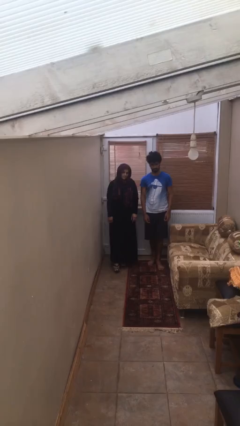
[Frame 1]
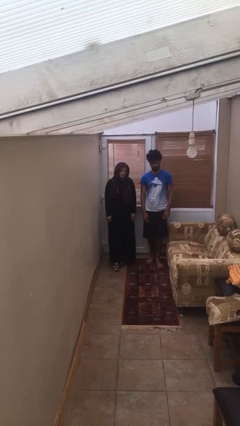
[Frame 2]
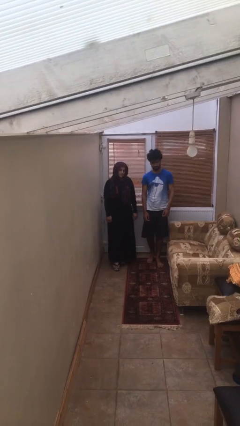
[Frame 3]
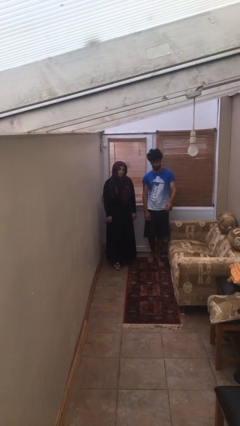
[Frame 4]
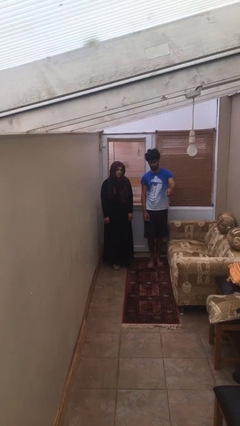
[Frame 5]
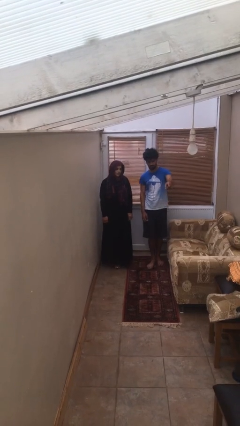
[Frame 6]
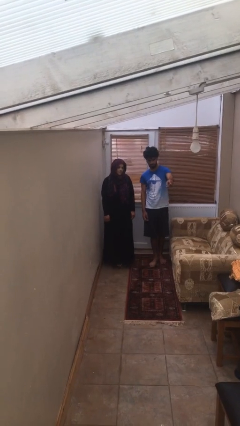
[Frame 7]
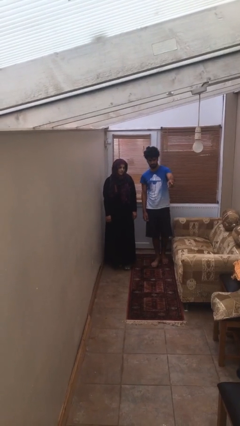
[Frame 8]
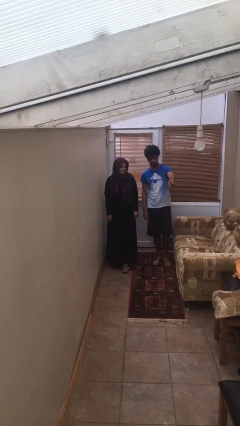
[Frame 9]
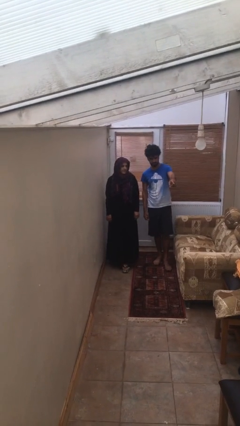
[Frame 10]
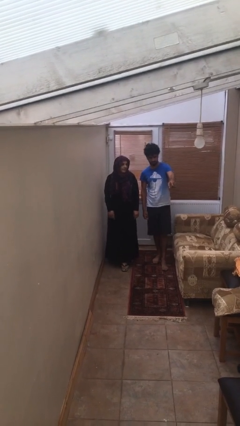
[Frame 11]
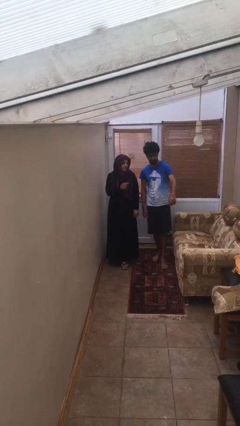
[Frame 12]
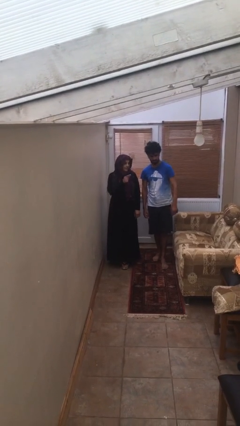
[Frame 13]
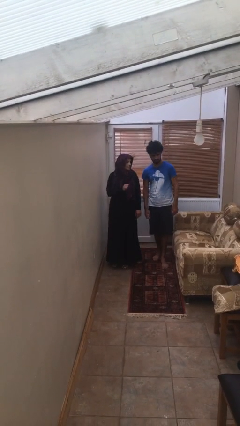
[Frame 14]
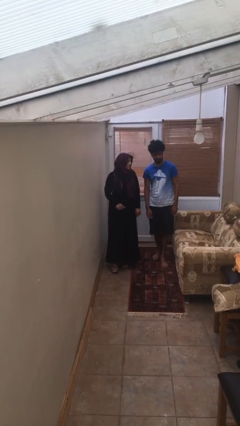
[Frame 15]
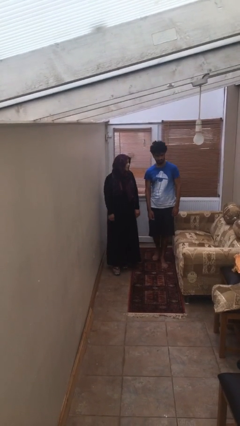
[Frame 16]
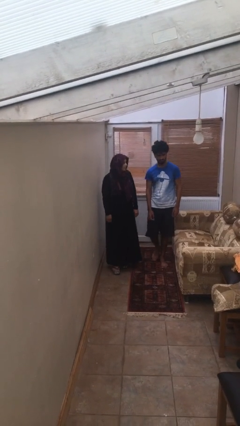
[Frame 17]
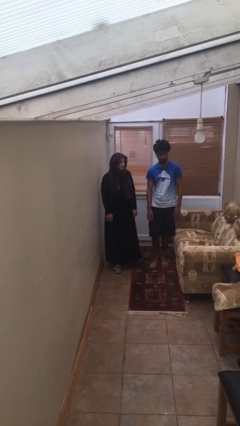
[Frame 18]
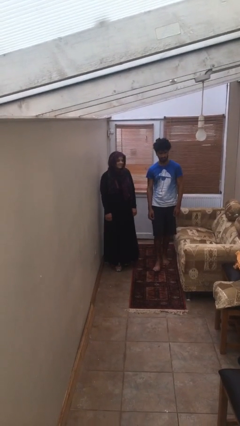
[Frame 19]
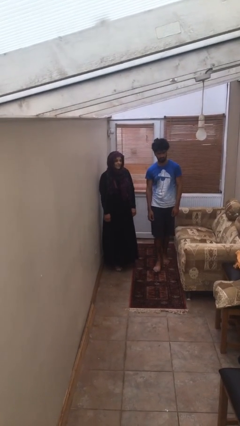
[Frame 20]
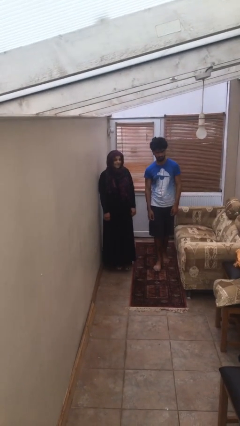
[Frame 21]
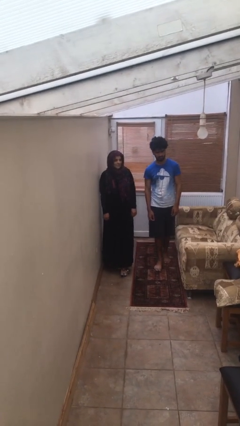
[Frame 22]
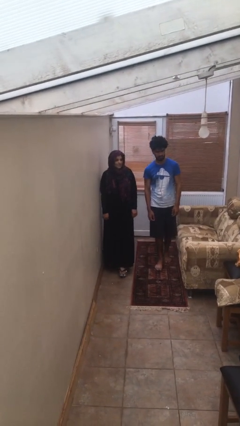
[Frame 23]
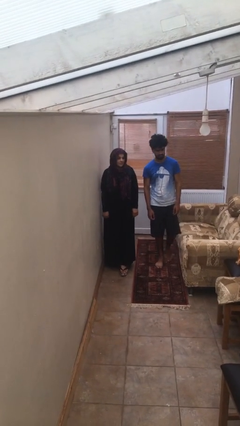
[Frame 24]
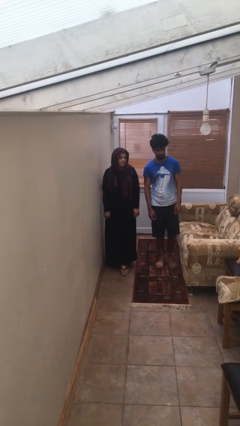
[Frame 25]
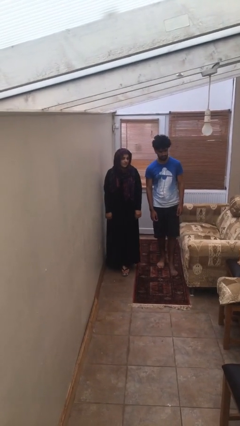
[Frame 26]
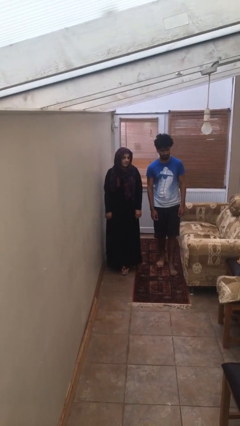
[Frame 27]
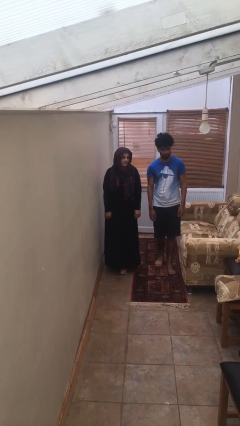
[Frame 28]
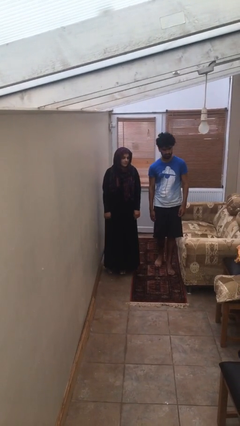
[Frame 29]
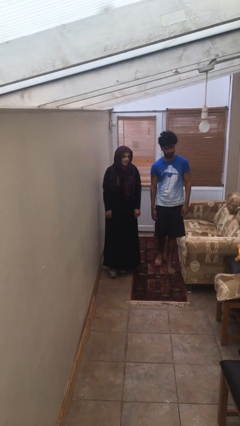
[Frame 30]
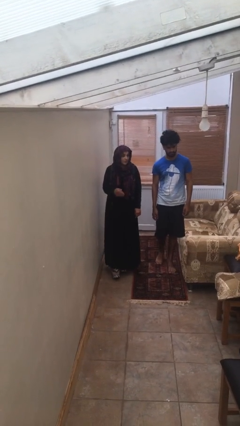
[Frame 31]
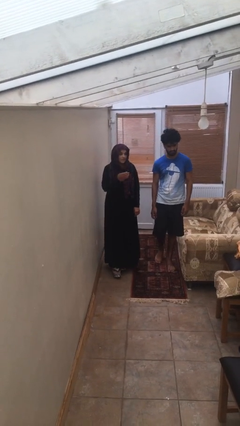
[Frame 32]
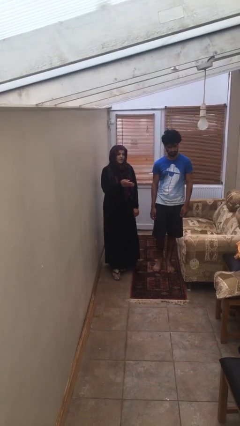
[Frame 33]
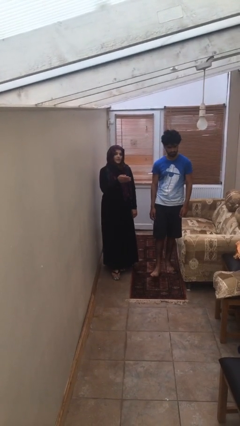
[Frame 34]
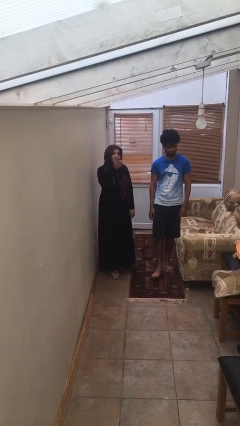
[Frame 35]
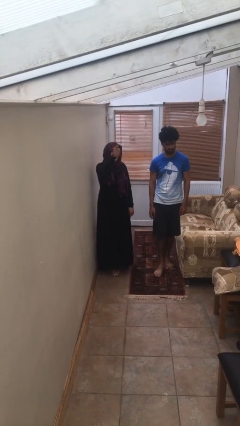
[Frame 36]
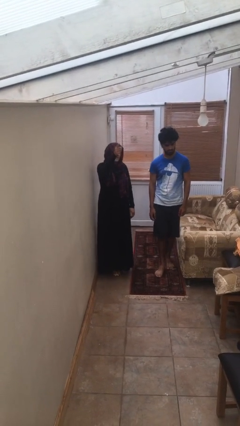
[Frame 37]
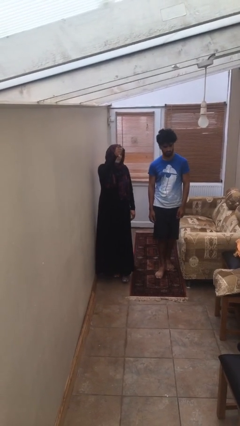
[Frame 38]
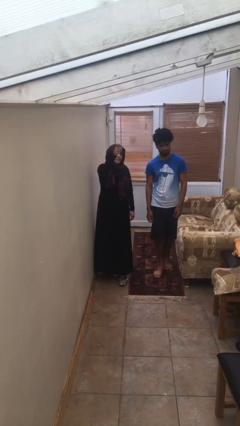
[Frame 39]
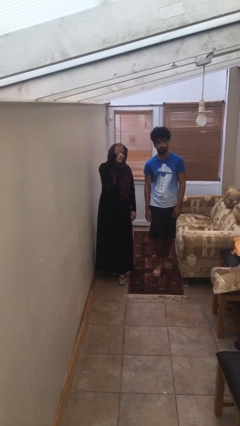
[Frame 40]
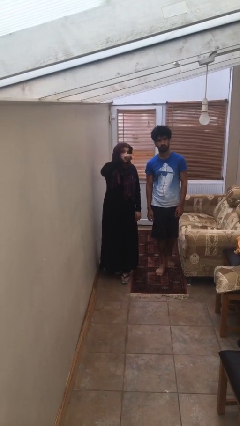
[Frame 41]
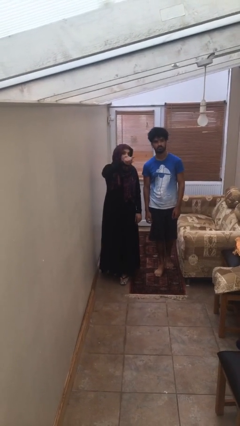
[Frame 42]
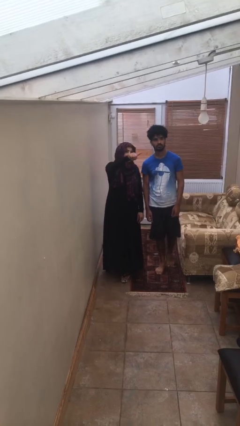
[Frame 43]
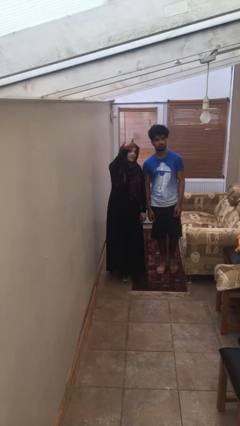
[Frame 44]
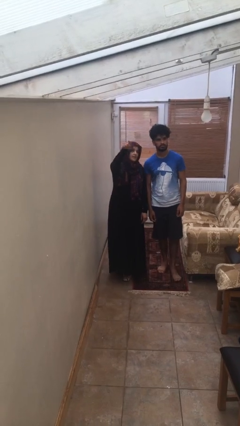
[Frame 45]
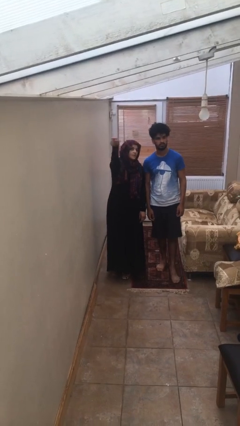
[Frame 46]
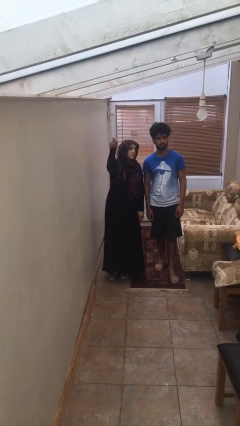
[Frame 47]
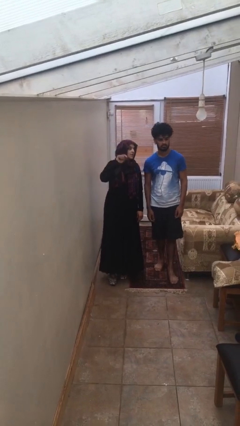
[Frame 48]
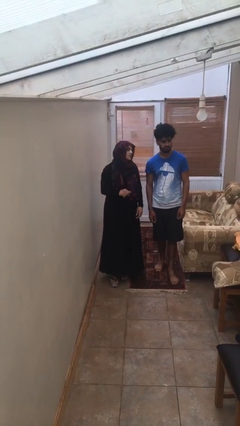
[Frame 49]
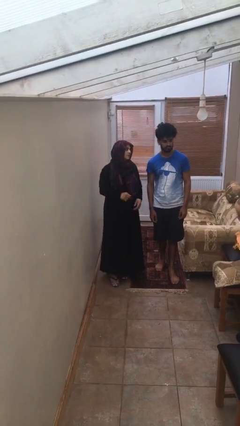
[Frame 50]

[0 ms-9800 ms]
person talks to person

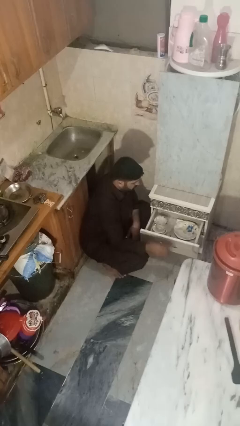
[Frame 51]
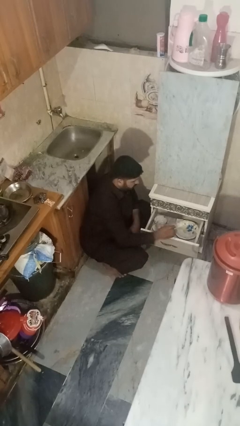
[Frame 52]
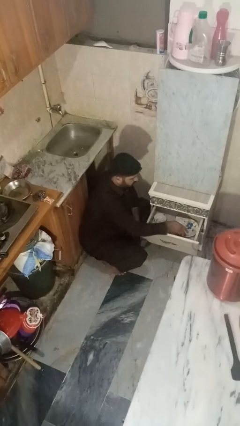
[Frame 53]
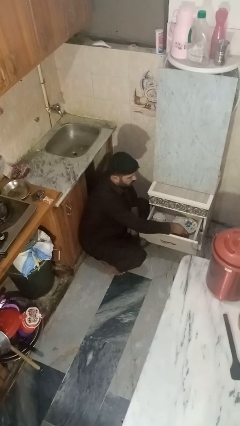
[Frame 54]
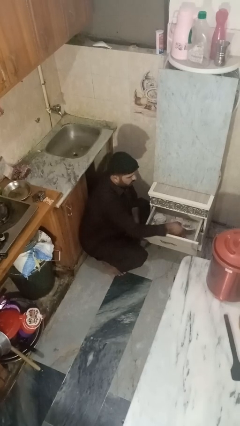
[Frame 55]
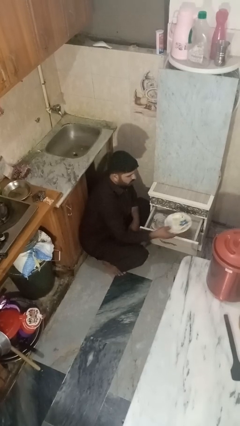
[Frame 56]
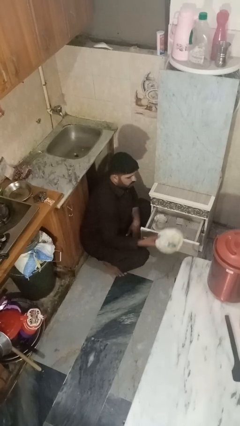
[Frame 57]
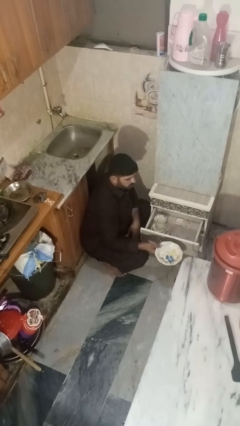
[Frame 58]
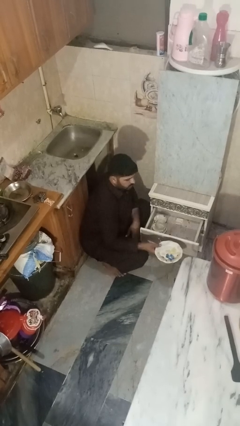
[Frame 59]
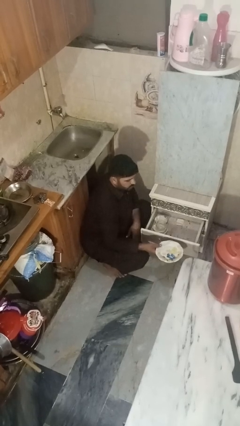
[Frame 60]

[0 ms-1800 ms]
person takes object from kitchen drawer

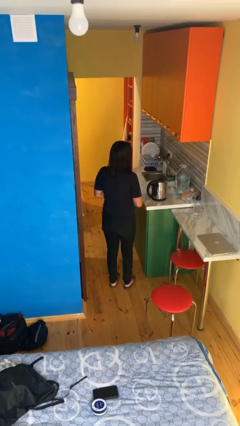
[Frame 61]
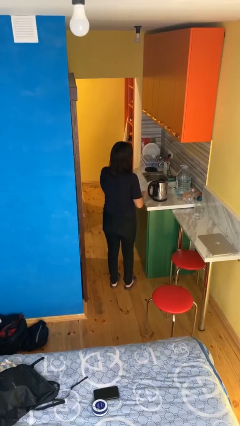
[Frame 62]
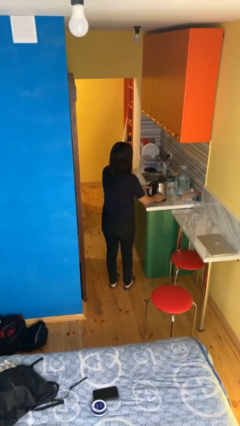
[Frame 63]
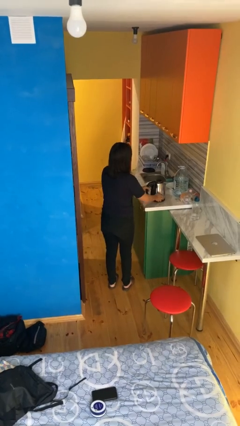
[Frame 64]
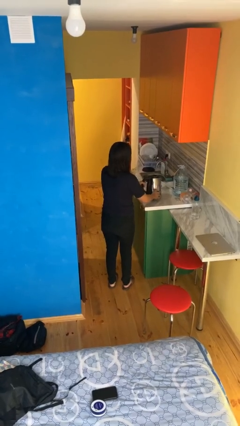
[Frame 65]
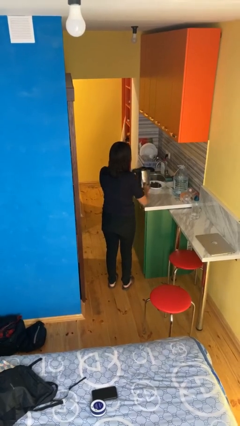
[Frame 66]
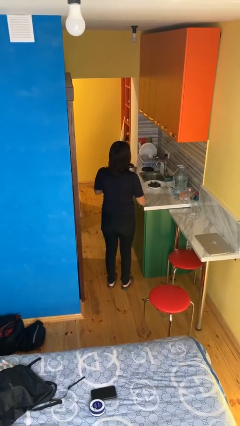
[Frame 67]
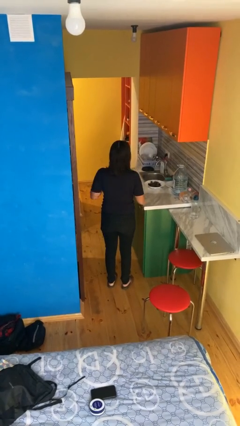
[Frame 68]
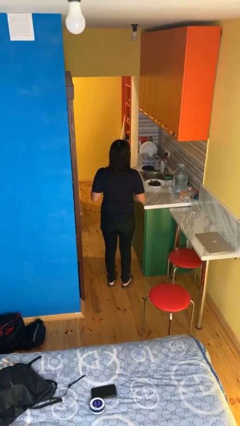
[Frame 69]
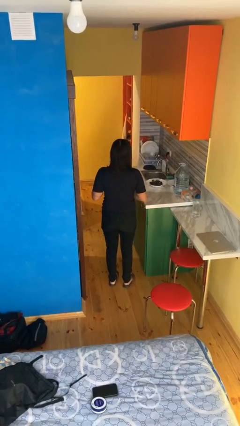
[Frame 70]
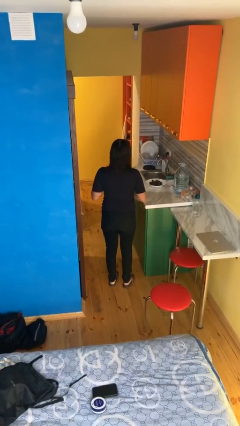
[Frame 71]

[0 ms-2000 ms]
person picks up object from countertop

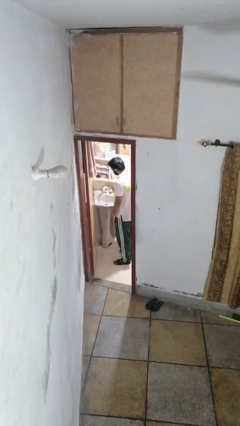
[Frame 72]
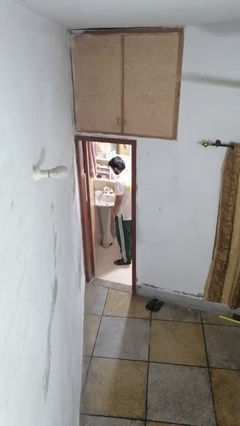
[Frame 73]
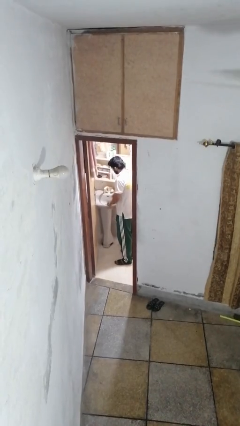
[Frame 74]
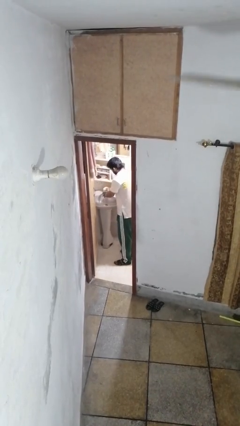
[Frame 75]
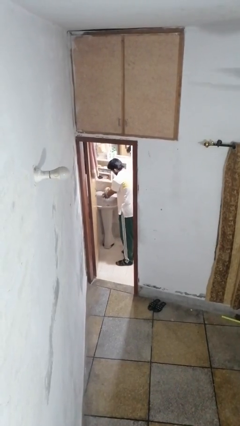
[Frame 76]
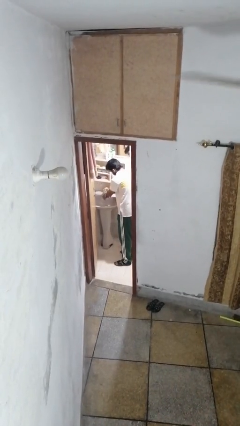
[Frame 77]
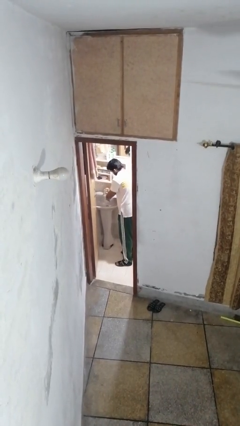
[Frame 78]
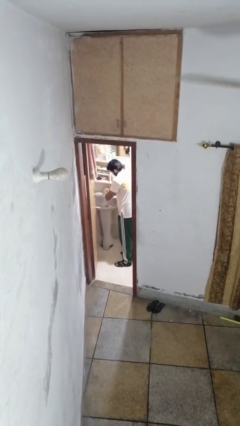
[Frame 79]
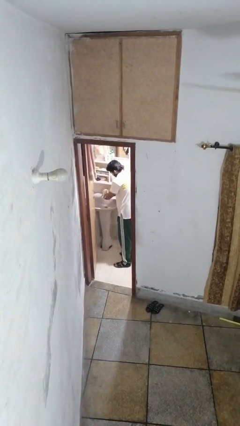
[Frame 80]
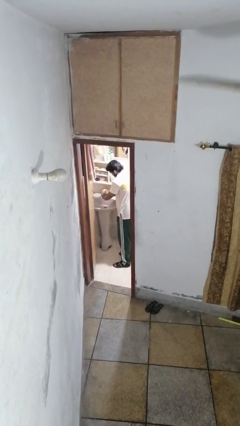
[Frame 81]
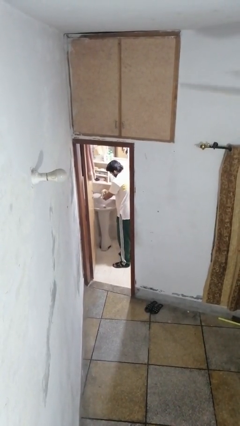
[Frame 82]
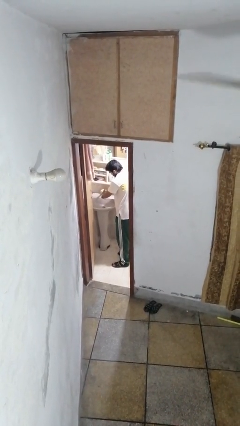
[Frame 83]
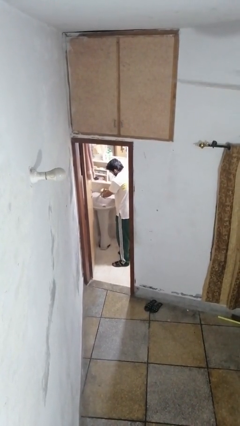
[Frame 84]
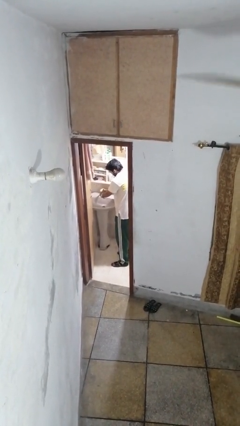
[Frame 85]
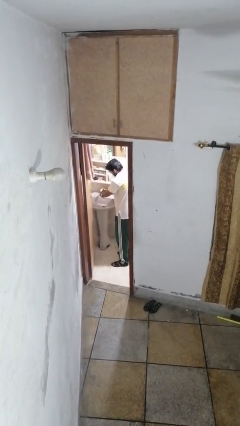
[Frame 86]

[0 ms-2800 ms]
person washes hands

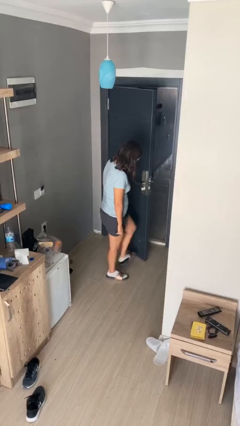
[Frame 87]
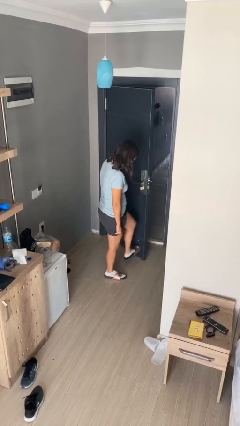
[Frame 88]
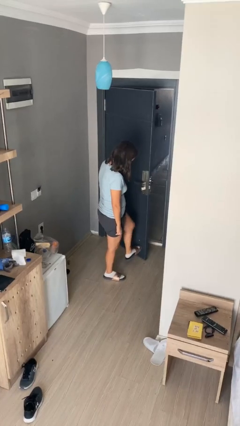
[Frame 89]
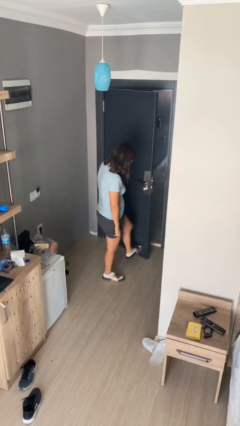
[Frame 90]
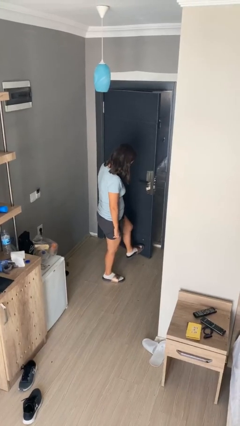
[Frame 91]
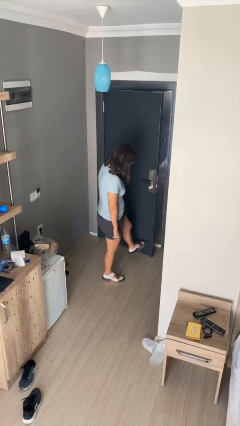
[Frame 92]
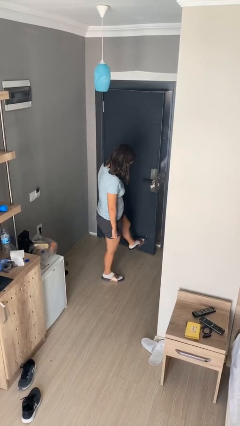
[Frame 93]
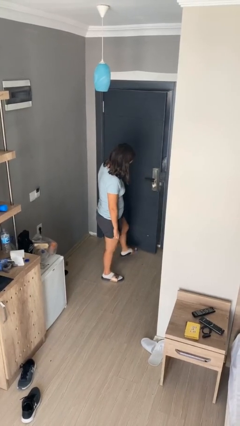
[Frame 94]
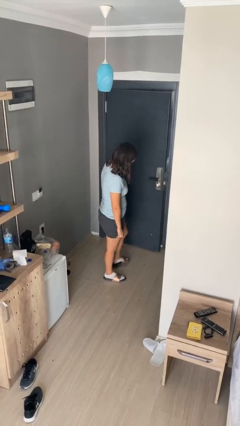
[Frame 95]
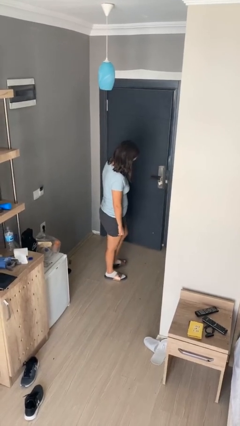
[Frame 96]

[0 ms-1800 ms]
person closes door with foot
